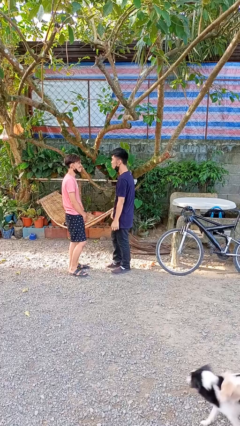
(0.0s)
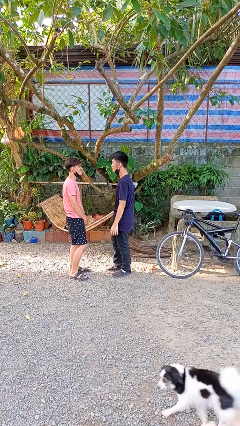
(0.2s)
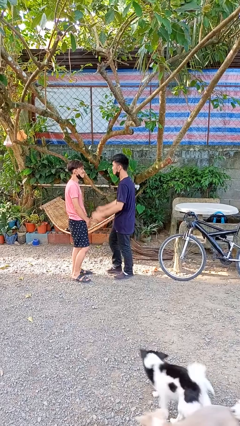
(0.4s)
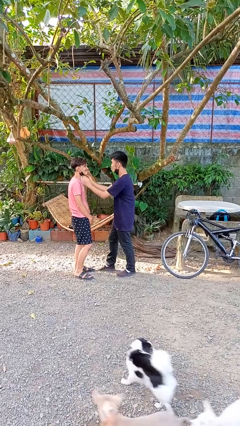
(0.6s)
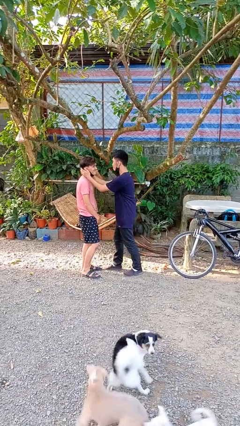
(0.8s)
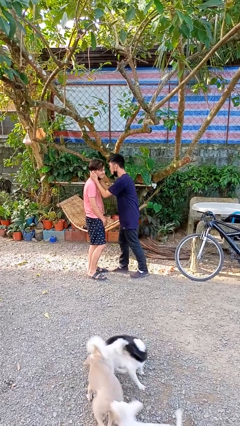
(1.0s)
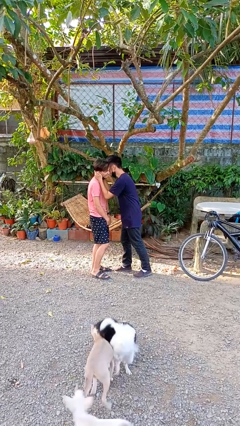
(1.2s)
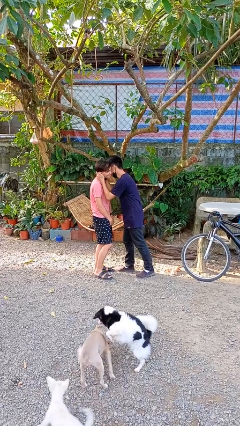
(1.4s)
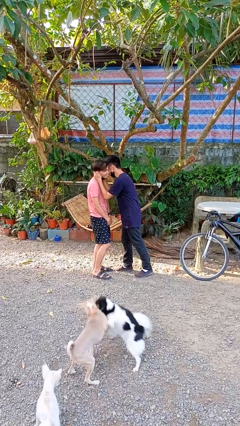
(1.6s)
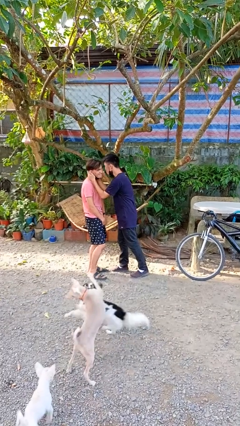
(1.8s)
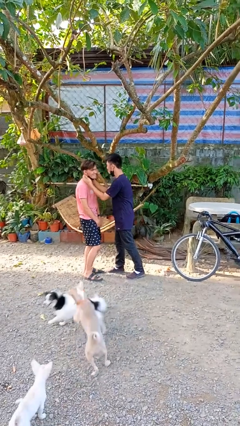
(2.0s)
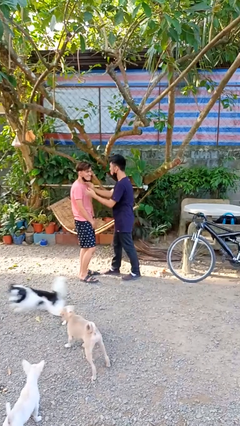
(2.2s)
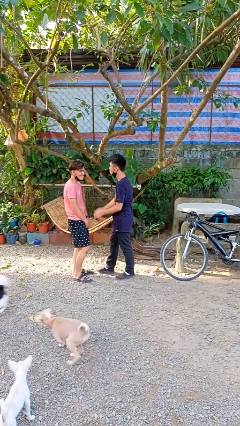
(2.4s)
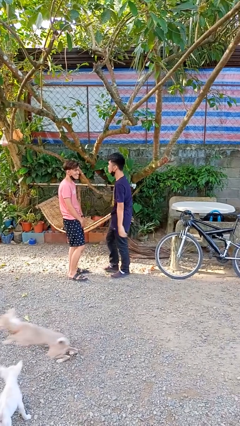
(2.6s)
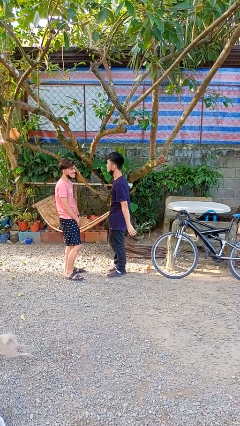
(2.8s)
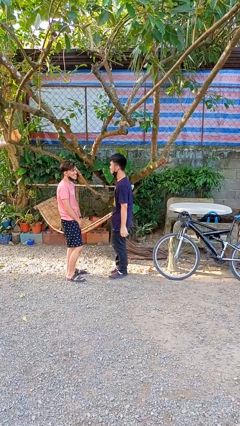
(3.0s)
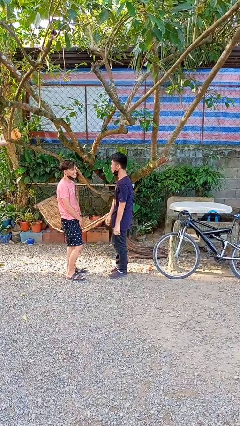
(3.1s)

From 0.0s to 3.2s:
person kisses cheek of person

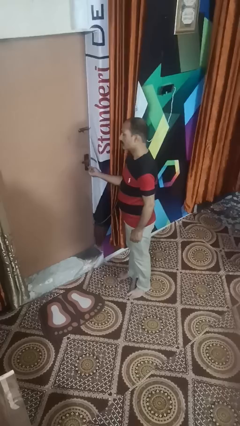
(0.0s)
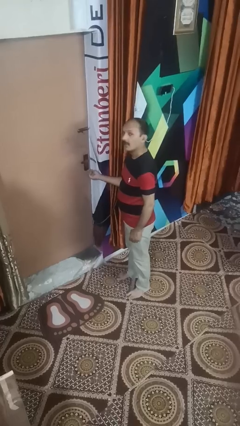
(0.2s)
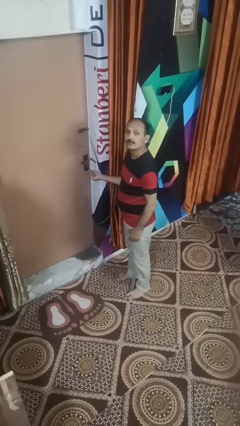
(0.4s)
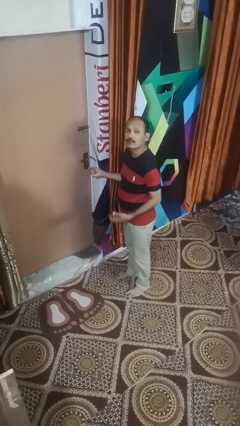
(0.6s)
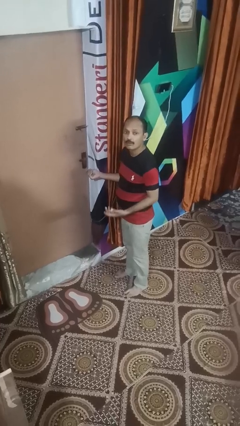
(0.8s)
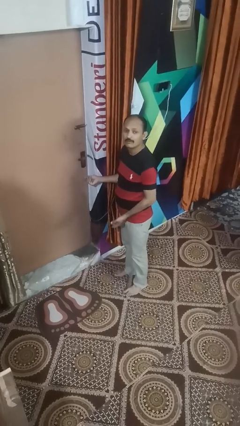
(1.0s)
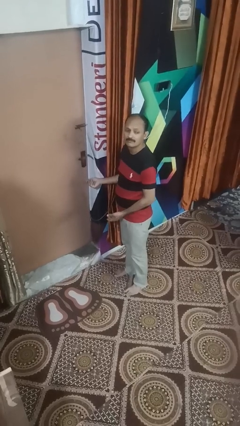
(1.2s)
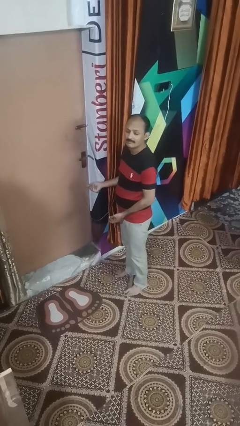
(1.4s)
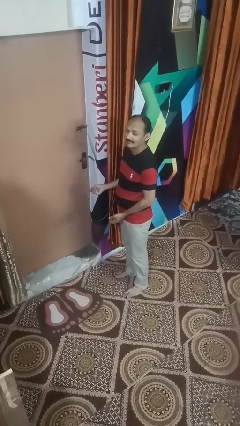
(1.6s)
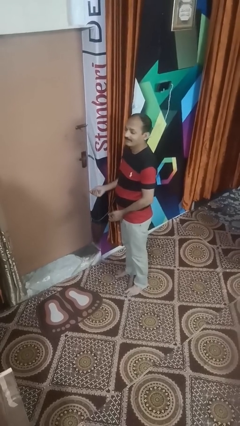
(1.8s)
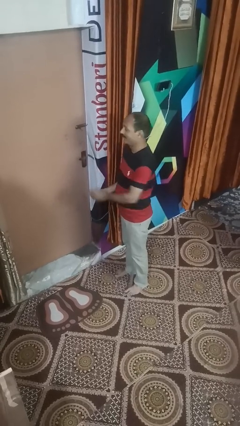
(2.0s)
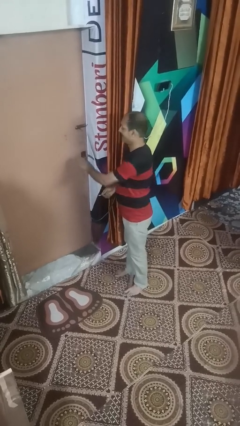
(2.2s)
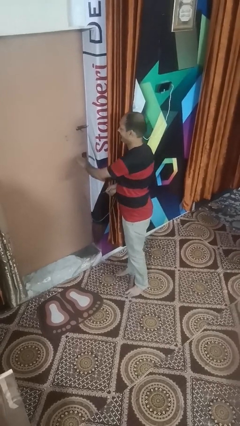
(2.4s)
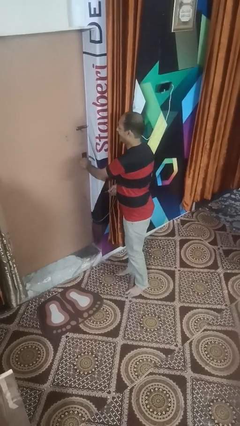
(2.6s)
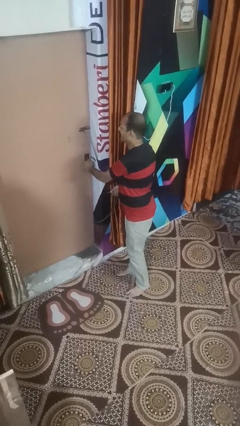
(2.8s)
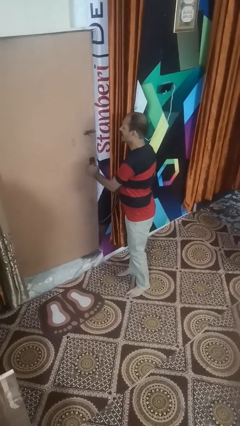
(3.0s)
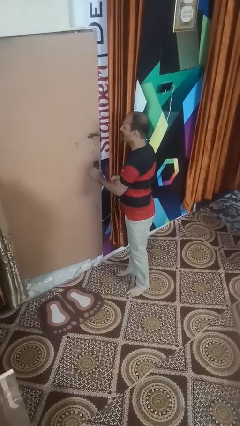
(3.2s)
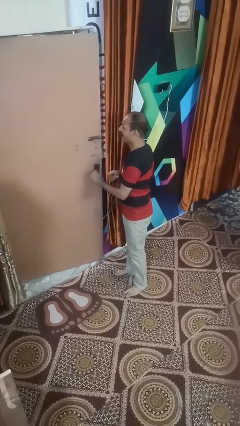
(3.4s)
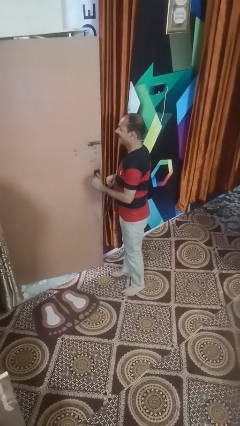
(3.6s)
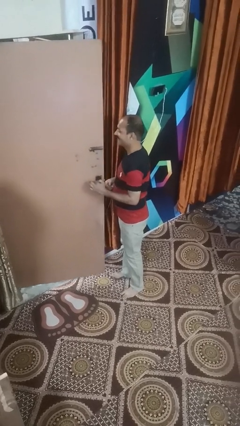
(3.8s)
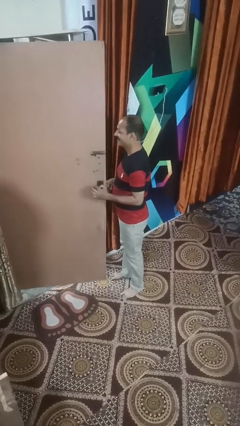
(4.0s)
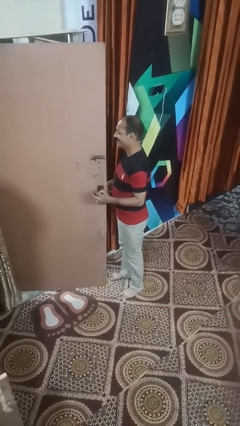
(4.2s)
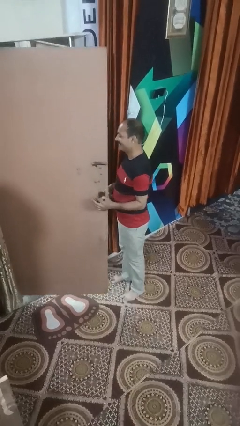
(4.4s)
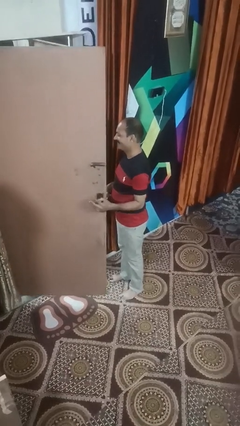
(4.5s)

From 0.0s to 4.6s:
person opens facility door

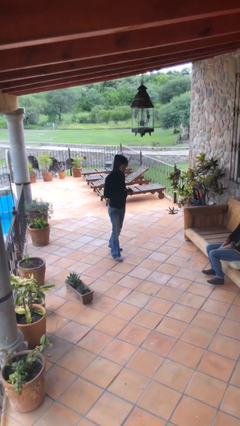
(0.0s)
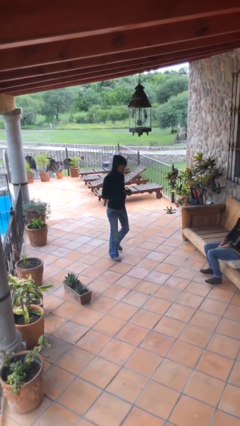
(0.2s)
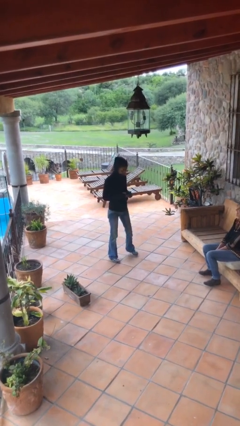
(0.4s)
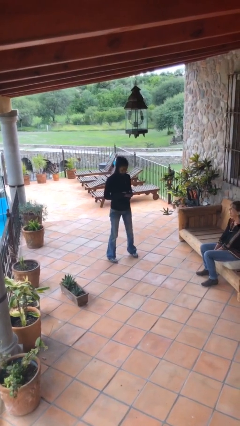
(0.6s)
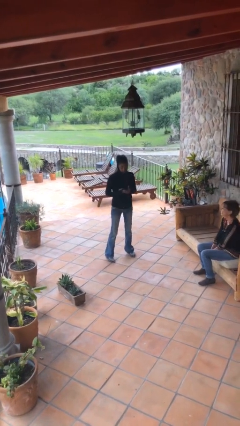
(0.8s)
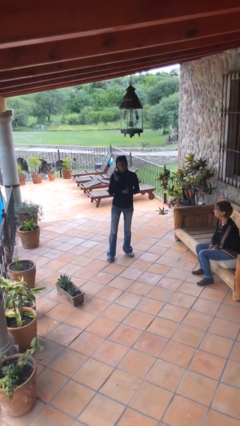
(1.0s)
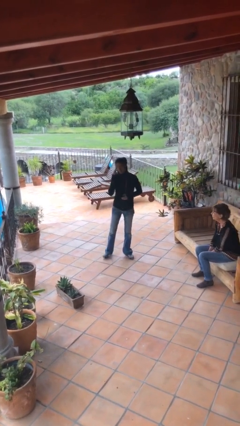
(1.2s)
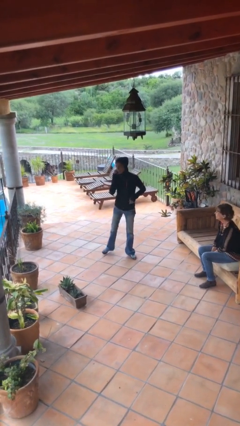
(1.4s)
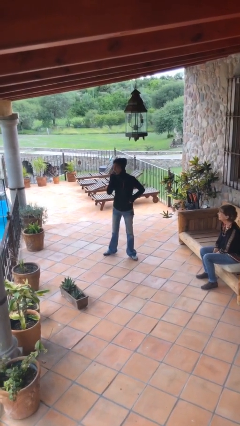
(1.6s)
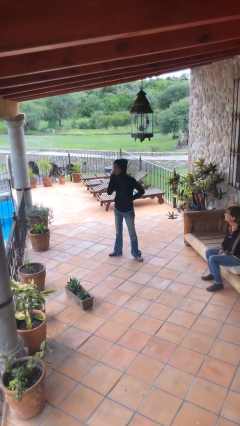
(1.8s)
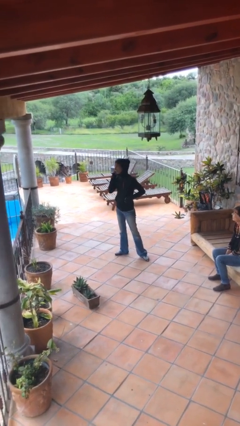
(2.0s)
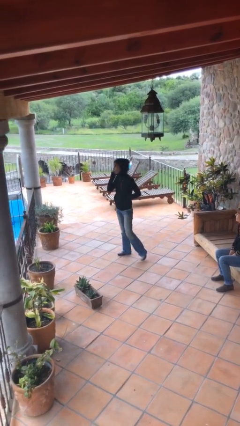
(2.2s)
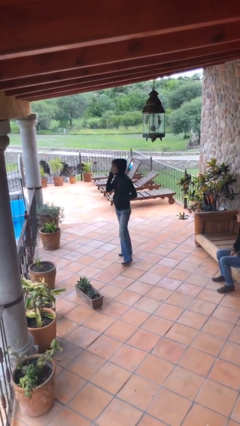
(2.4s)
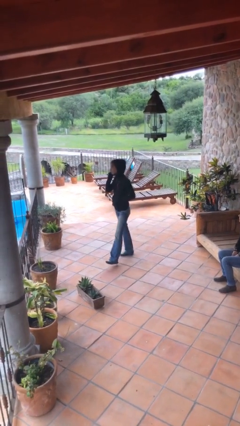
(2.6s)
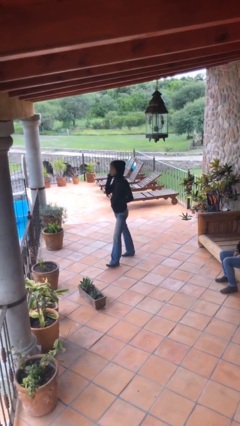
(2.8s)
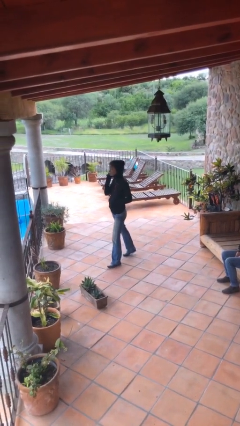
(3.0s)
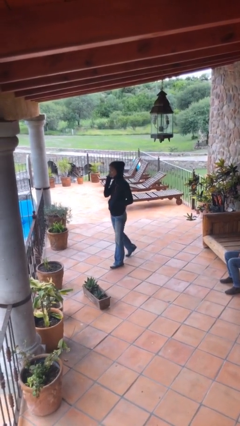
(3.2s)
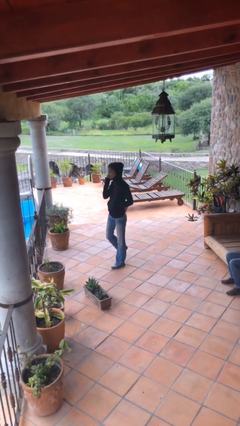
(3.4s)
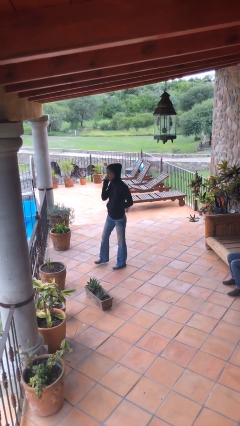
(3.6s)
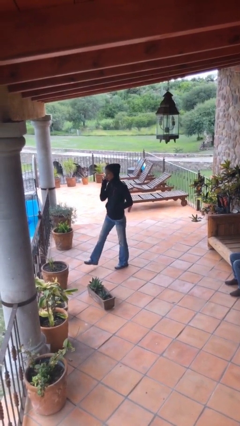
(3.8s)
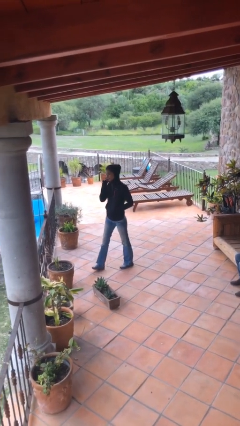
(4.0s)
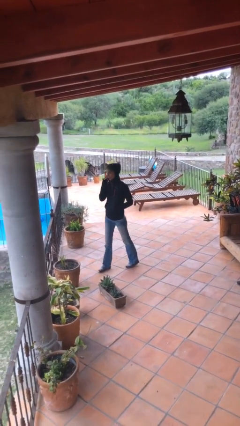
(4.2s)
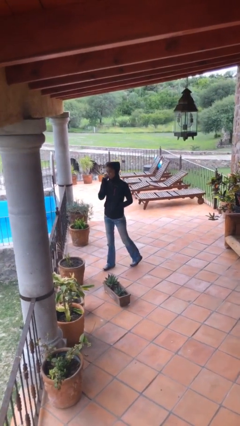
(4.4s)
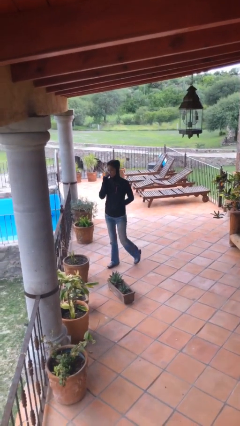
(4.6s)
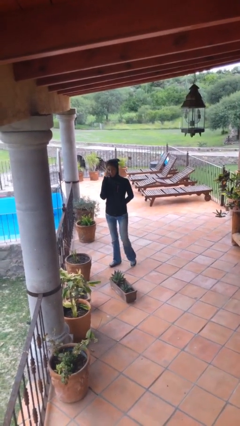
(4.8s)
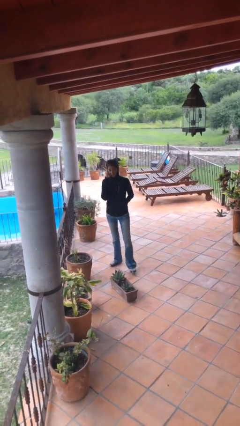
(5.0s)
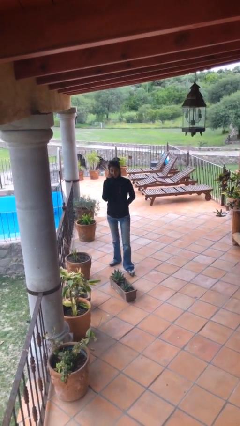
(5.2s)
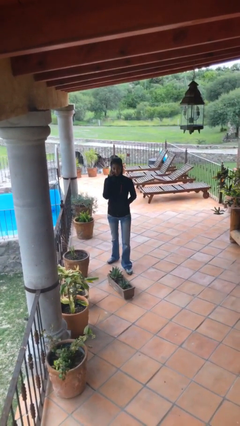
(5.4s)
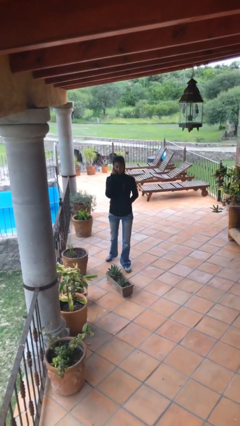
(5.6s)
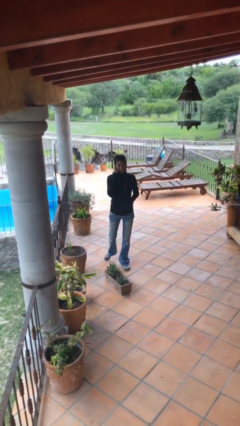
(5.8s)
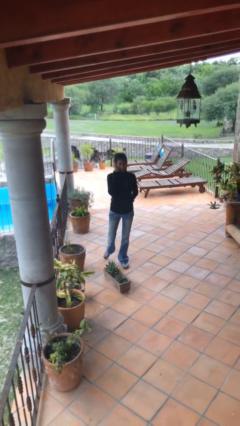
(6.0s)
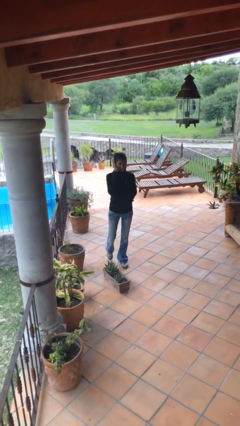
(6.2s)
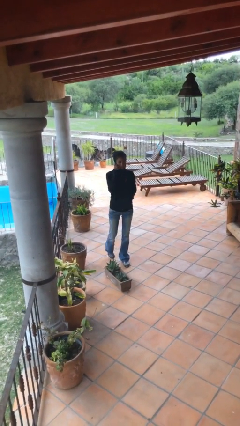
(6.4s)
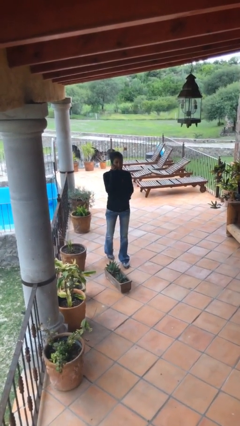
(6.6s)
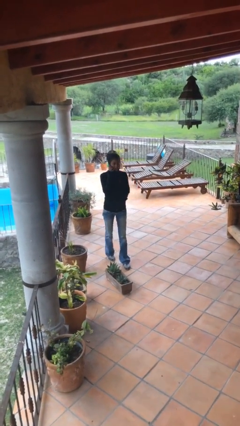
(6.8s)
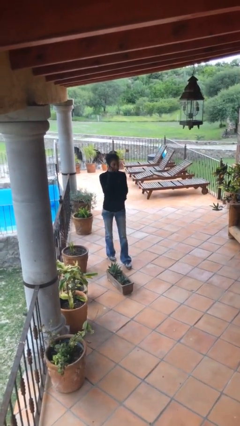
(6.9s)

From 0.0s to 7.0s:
person talks on phone

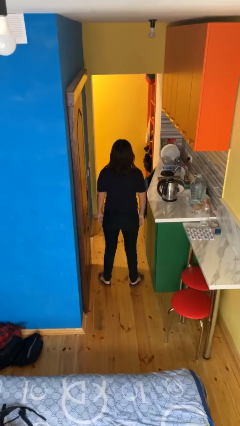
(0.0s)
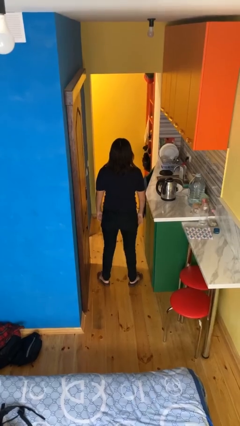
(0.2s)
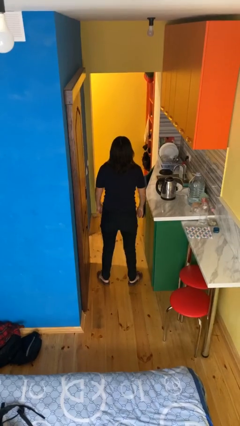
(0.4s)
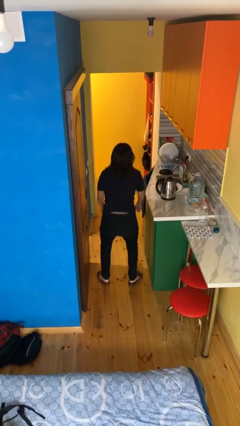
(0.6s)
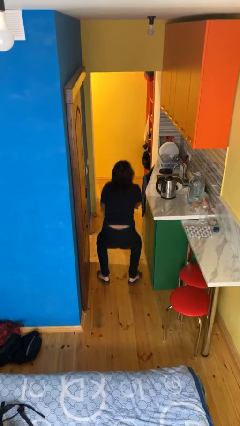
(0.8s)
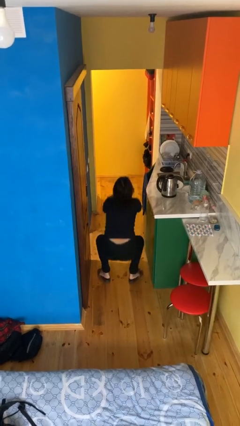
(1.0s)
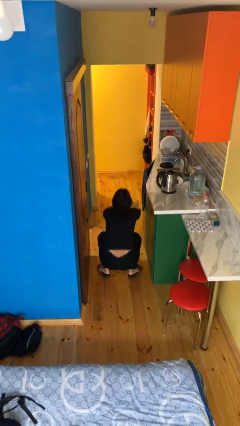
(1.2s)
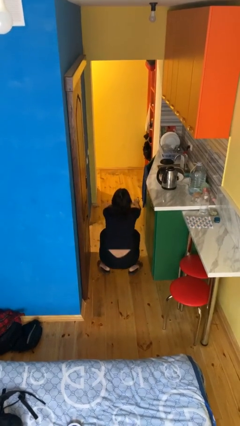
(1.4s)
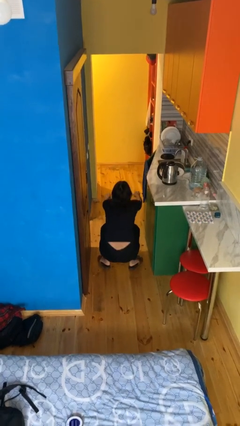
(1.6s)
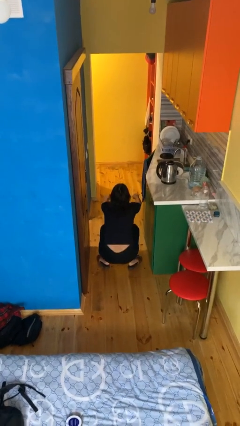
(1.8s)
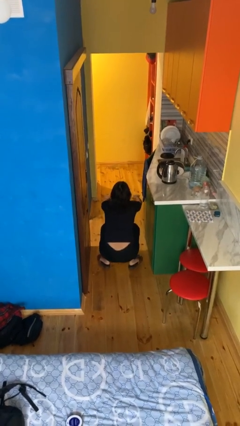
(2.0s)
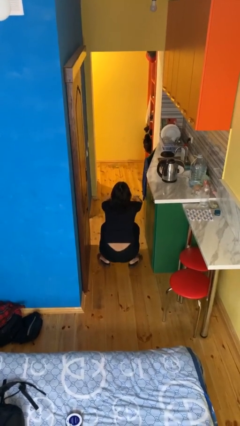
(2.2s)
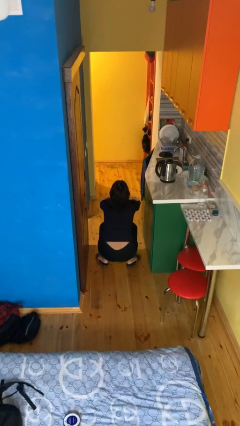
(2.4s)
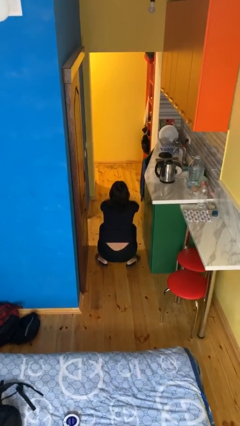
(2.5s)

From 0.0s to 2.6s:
person squats
